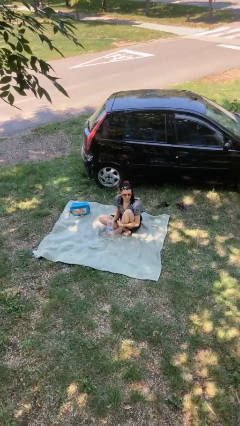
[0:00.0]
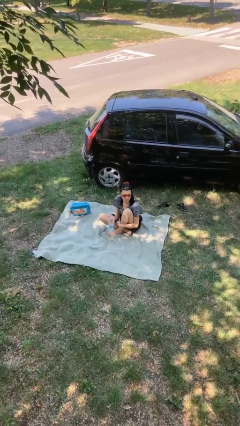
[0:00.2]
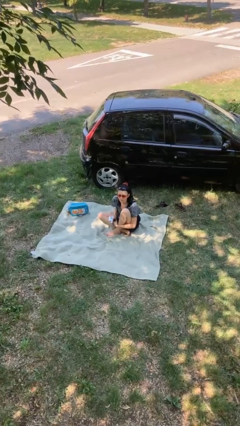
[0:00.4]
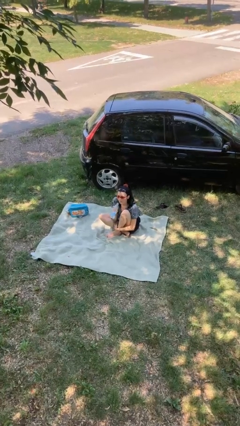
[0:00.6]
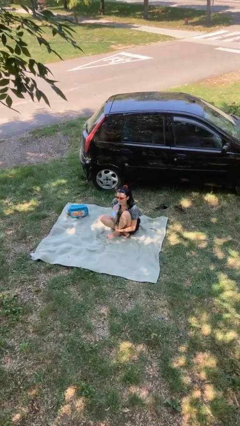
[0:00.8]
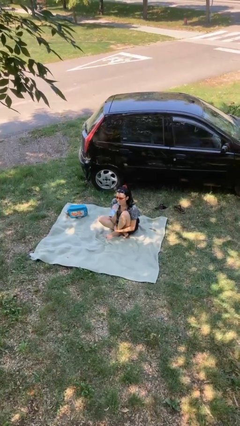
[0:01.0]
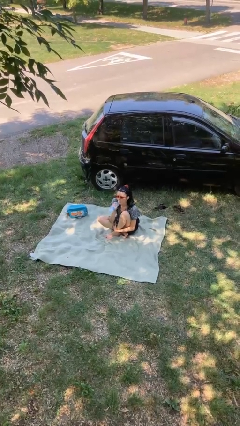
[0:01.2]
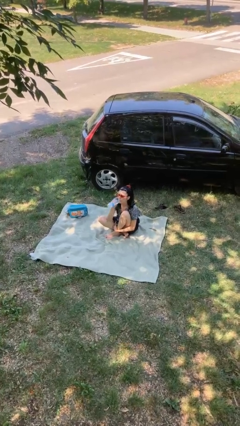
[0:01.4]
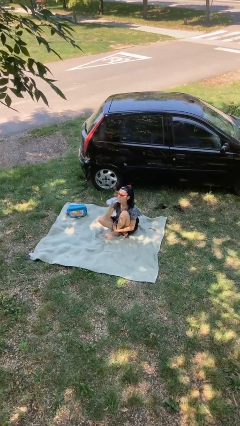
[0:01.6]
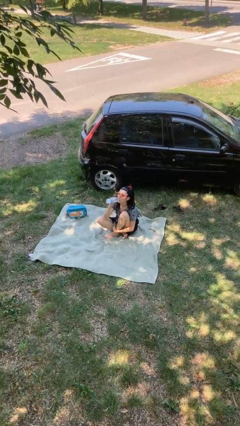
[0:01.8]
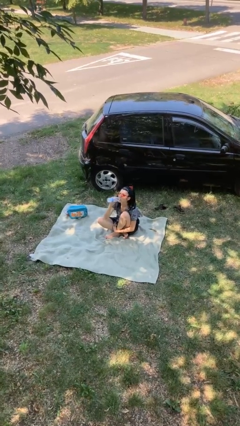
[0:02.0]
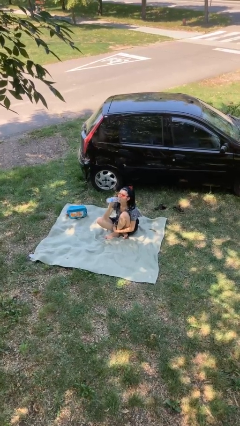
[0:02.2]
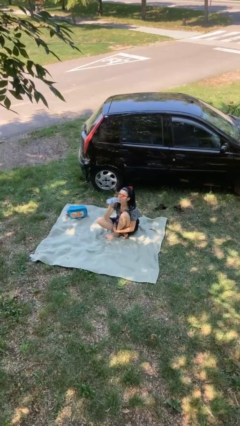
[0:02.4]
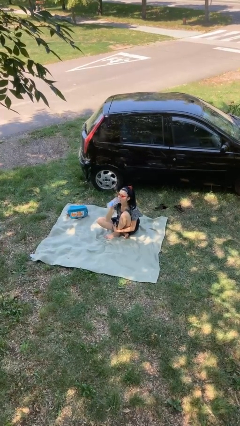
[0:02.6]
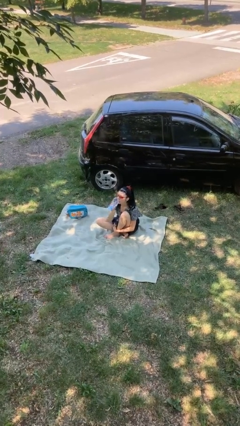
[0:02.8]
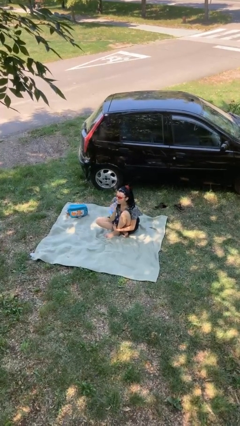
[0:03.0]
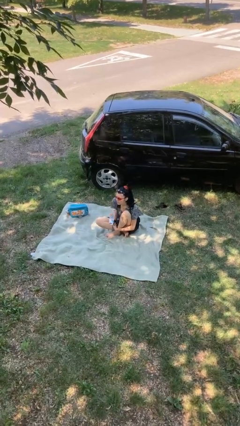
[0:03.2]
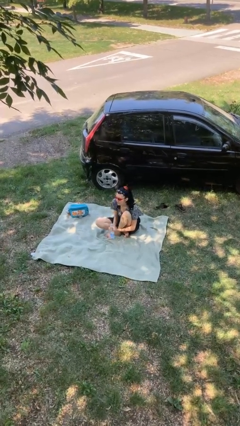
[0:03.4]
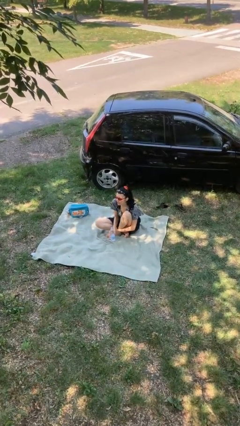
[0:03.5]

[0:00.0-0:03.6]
person drinks from bottle

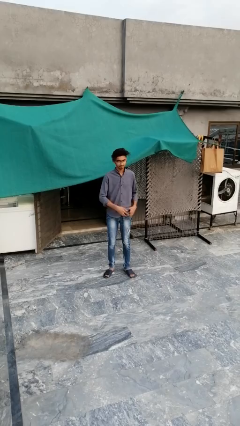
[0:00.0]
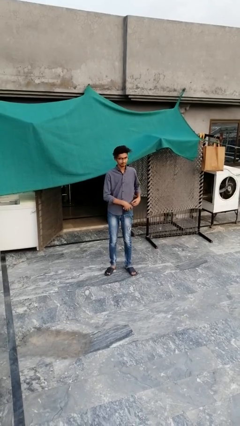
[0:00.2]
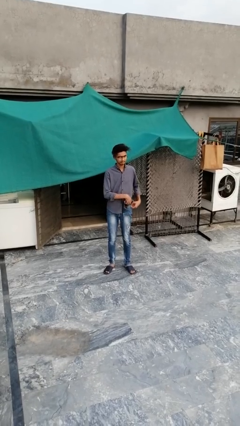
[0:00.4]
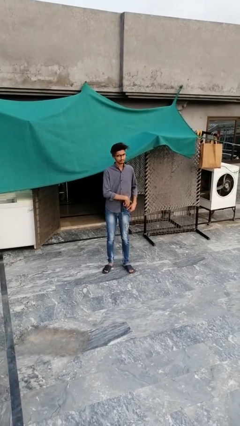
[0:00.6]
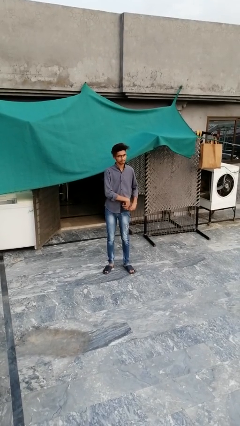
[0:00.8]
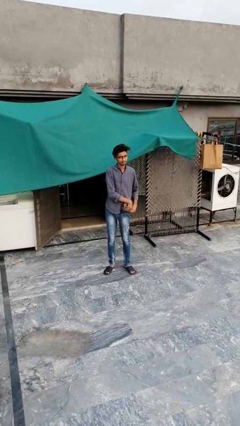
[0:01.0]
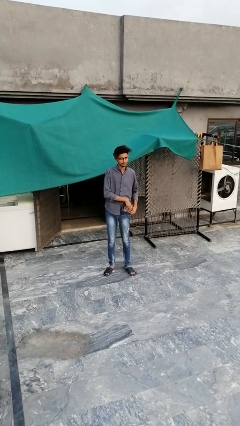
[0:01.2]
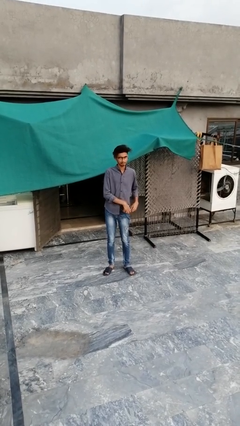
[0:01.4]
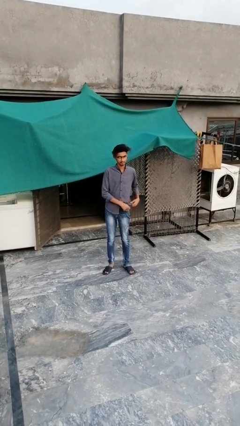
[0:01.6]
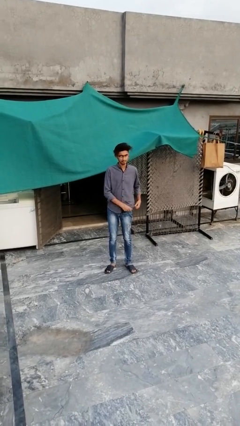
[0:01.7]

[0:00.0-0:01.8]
person puts phone into pocket

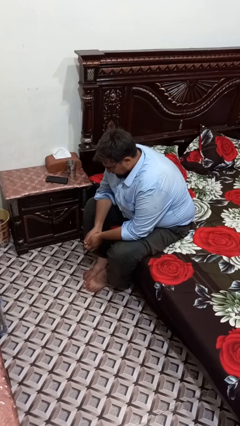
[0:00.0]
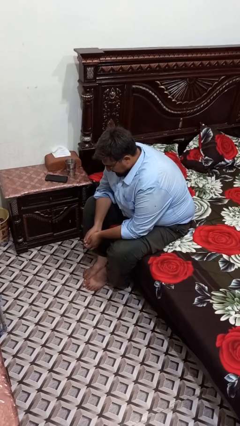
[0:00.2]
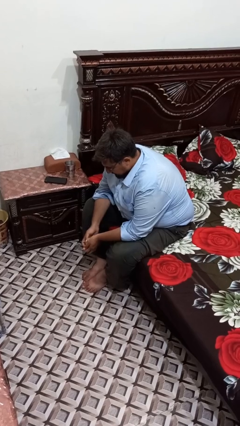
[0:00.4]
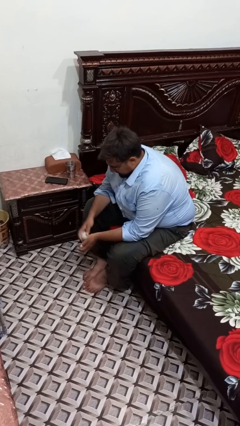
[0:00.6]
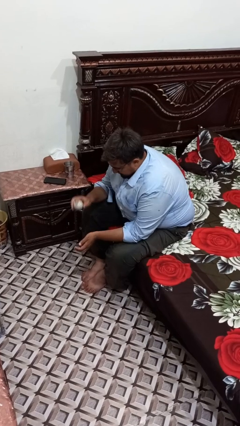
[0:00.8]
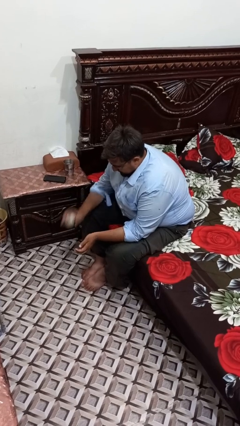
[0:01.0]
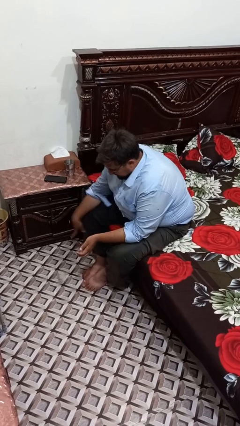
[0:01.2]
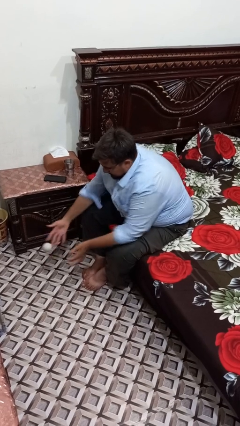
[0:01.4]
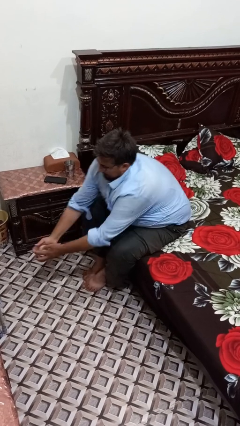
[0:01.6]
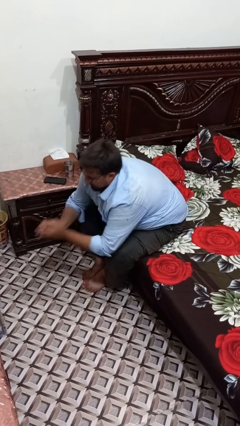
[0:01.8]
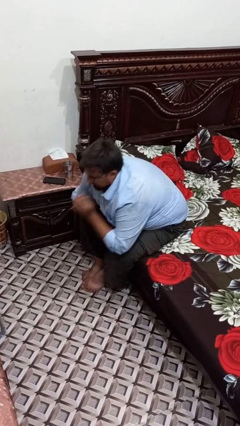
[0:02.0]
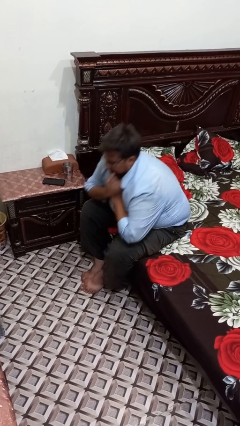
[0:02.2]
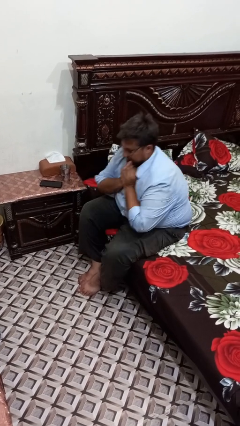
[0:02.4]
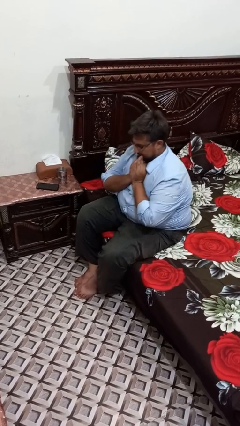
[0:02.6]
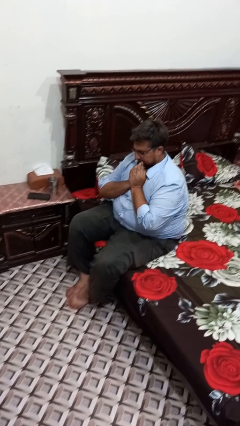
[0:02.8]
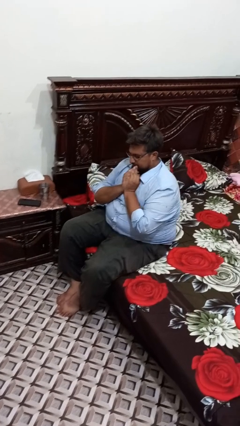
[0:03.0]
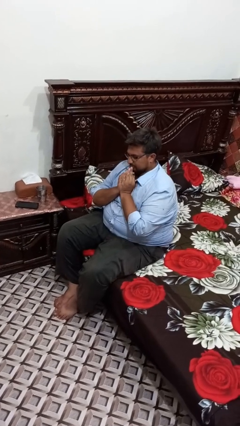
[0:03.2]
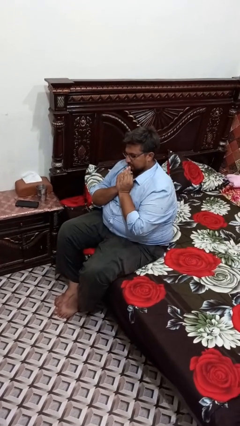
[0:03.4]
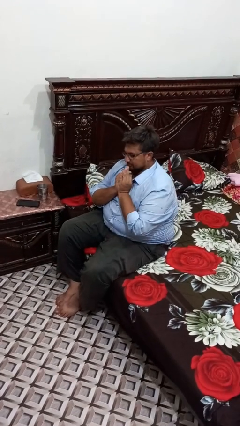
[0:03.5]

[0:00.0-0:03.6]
person bounces ball on floor

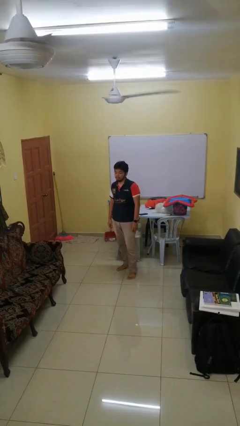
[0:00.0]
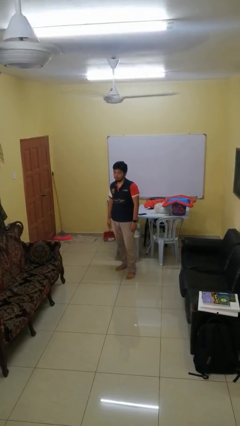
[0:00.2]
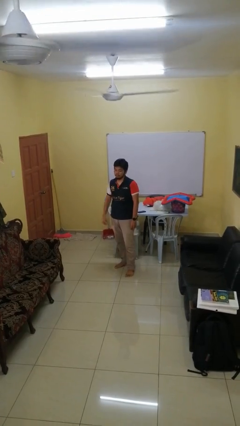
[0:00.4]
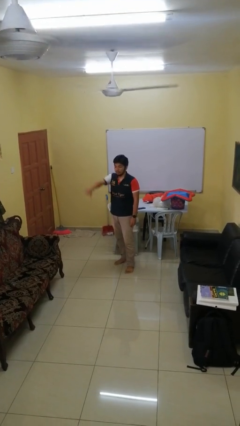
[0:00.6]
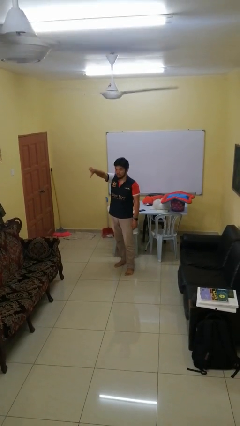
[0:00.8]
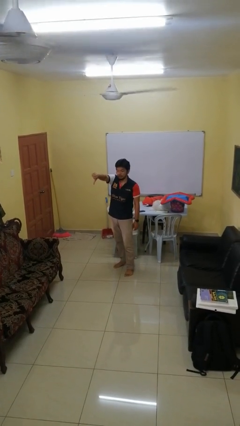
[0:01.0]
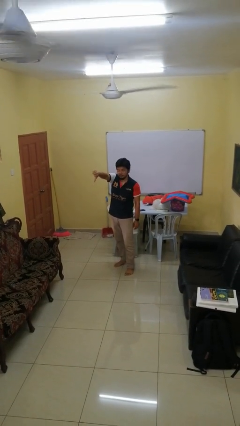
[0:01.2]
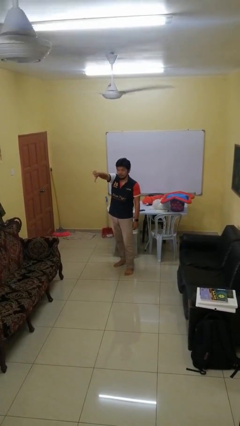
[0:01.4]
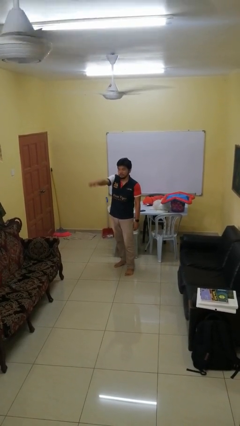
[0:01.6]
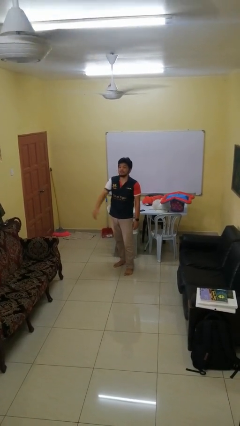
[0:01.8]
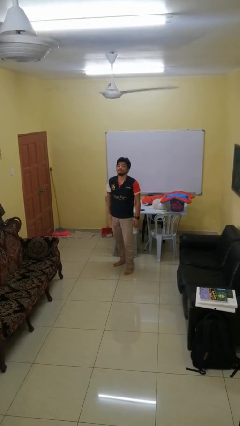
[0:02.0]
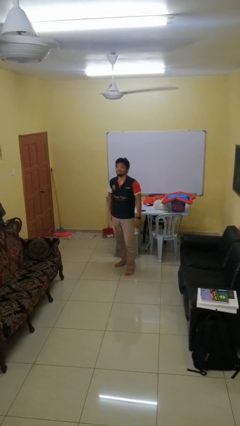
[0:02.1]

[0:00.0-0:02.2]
person gestures thumbs down

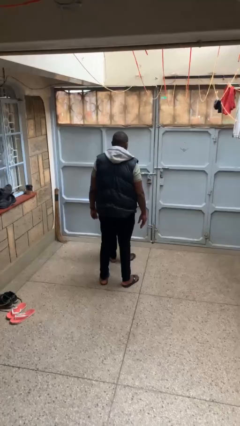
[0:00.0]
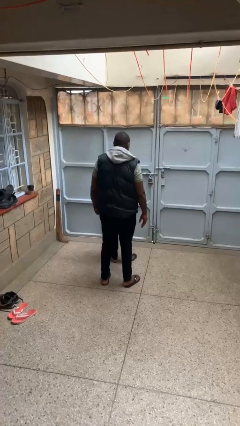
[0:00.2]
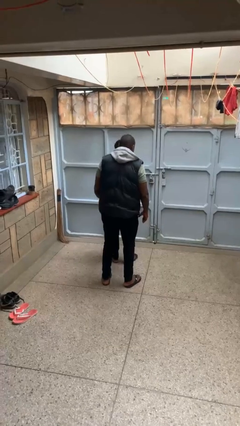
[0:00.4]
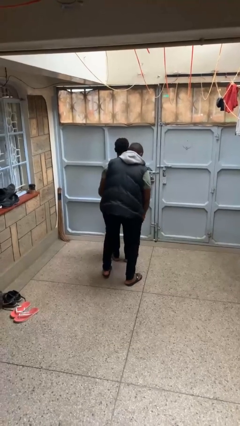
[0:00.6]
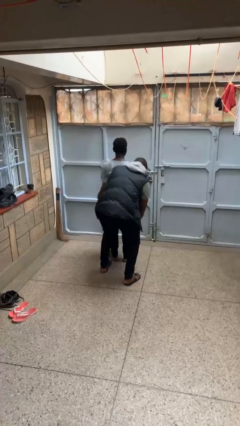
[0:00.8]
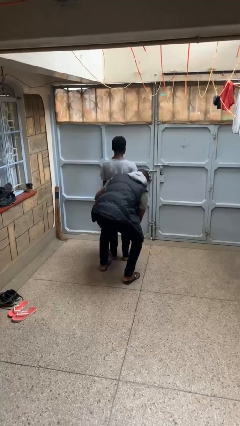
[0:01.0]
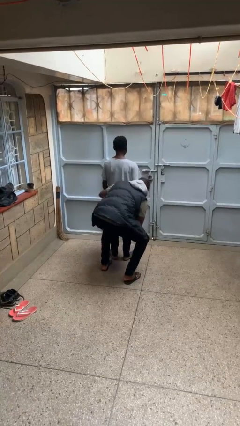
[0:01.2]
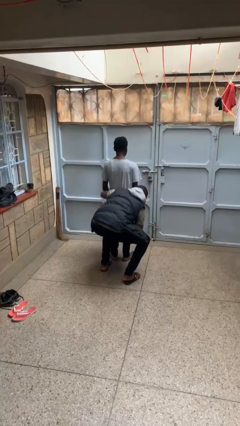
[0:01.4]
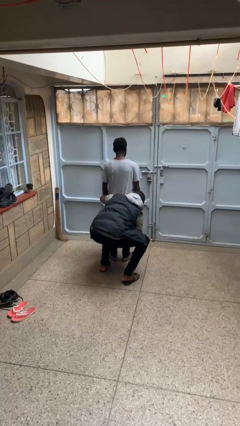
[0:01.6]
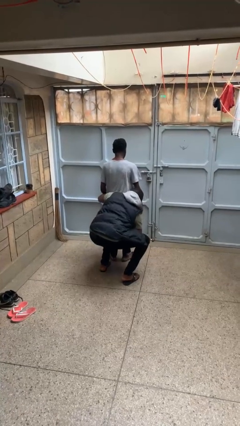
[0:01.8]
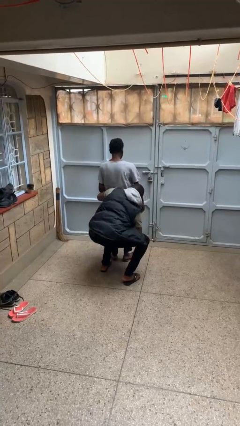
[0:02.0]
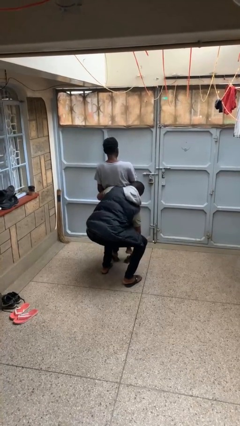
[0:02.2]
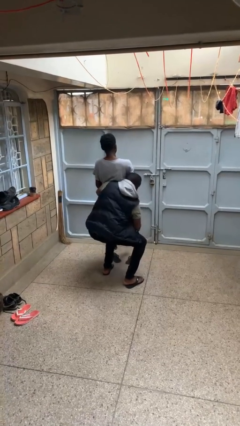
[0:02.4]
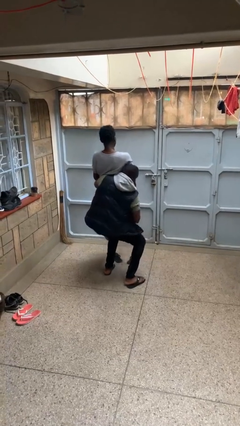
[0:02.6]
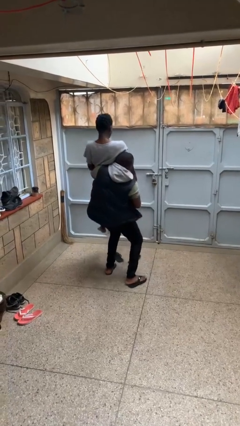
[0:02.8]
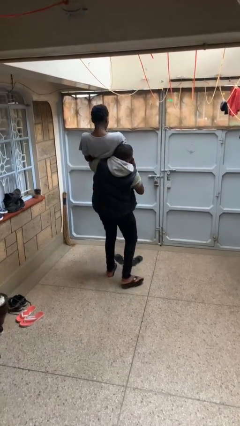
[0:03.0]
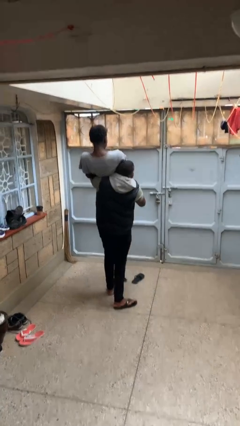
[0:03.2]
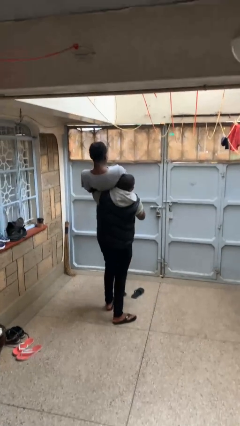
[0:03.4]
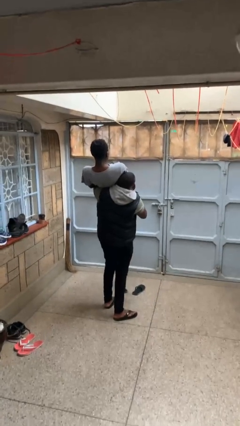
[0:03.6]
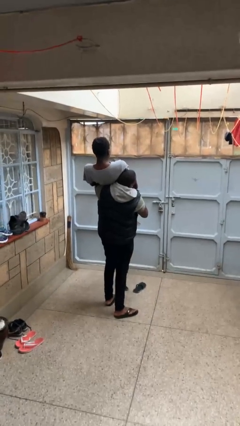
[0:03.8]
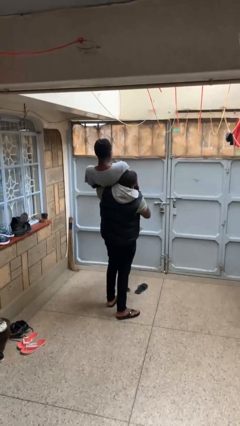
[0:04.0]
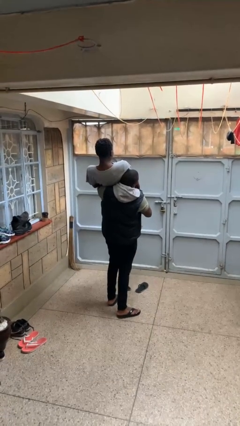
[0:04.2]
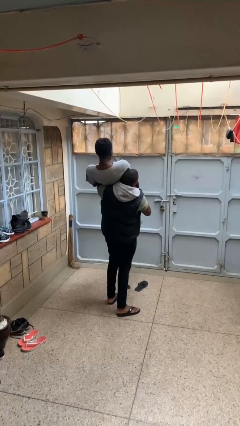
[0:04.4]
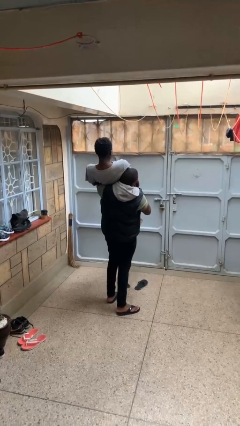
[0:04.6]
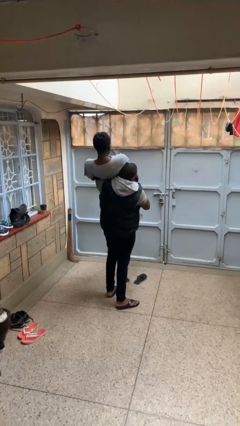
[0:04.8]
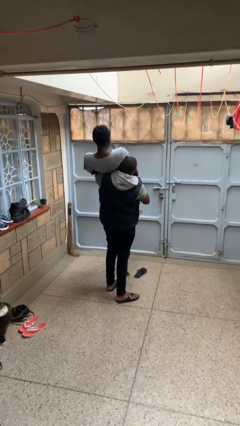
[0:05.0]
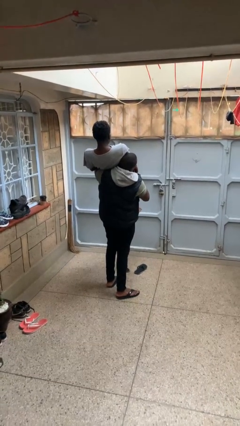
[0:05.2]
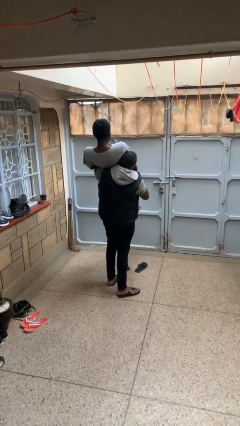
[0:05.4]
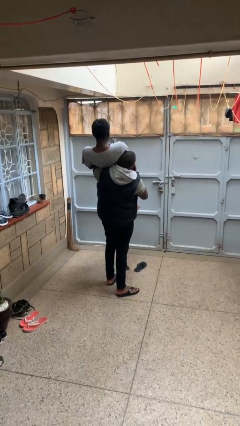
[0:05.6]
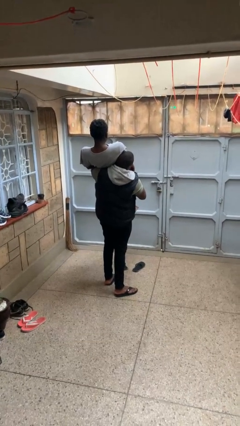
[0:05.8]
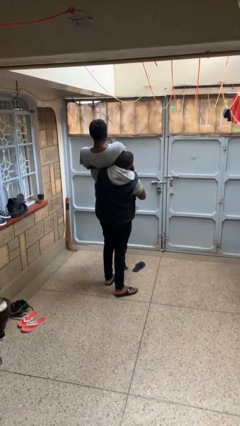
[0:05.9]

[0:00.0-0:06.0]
person carries person over shoulder

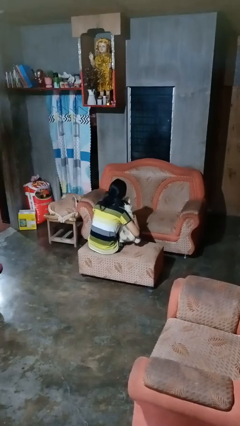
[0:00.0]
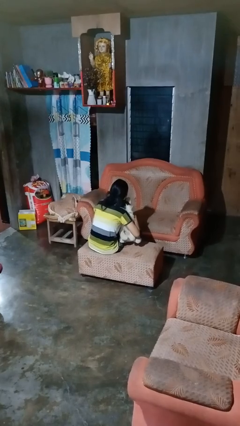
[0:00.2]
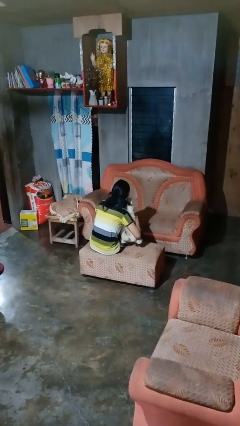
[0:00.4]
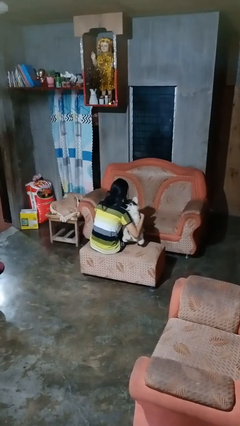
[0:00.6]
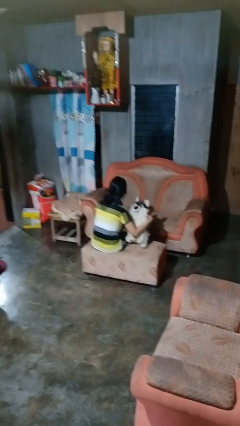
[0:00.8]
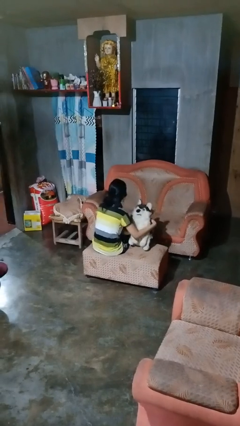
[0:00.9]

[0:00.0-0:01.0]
person hugs stuffed animal
